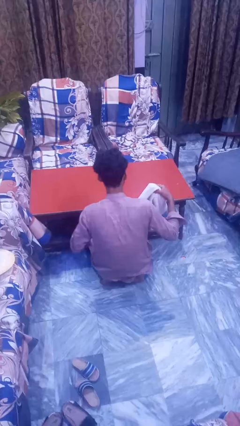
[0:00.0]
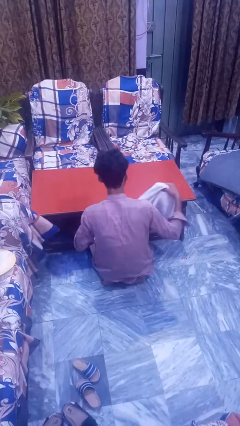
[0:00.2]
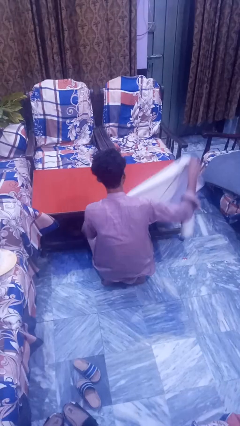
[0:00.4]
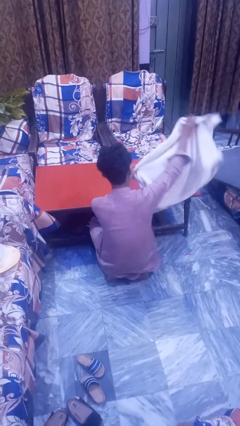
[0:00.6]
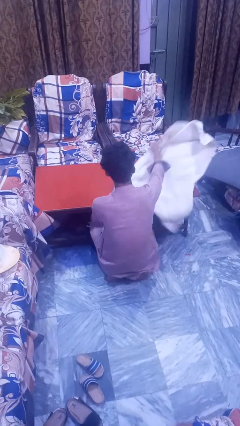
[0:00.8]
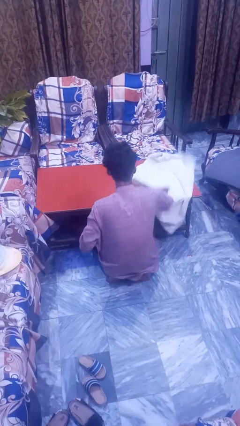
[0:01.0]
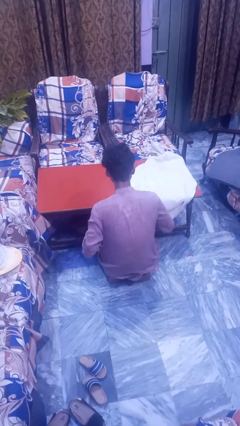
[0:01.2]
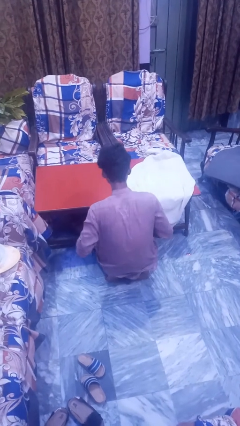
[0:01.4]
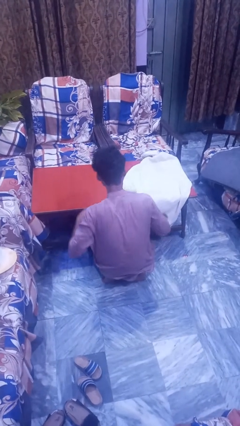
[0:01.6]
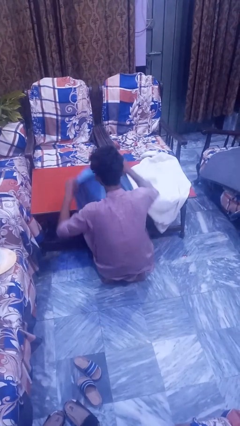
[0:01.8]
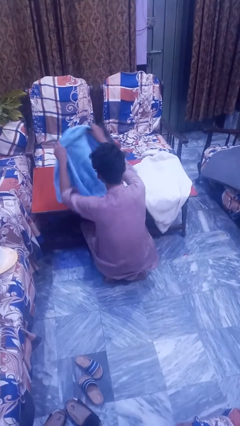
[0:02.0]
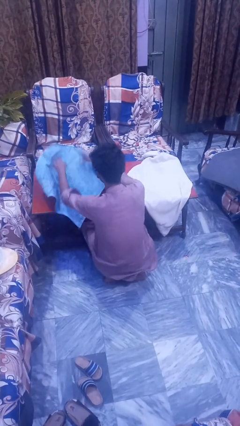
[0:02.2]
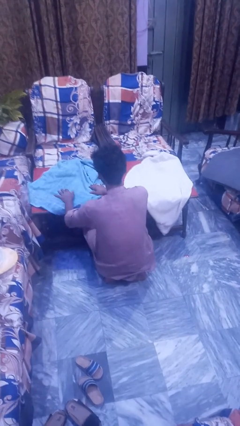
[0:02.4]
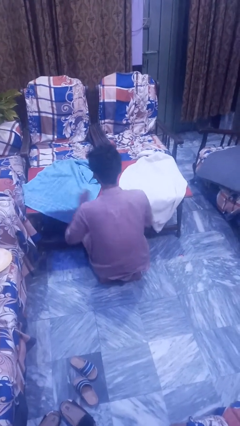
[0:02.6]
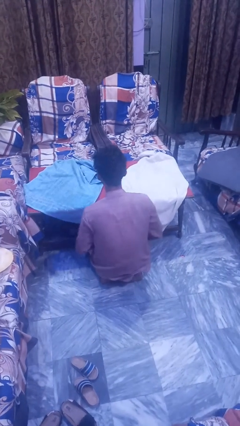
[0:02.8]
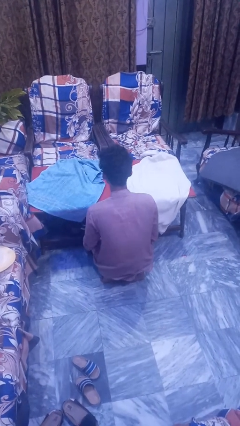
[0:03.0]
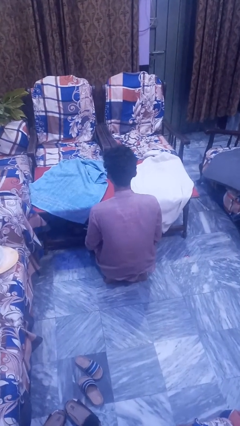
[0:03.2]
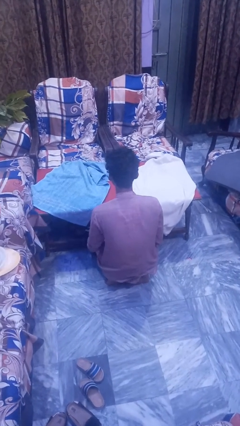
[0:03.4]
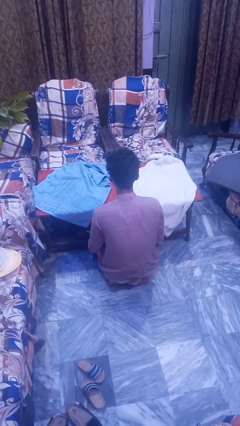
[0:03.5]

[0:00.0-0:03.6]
person spreads tablecloth

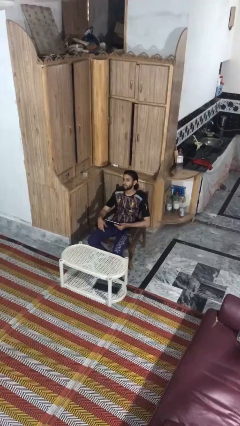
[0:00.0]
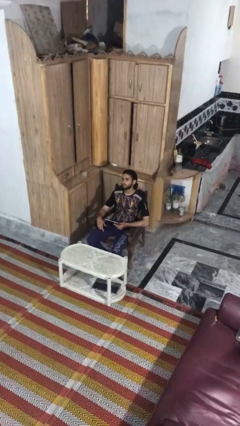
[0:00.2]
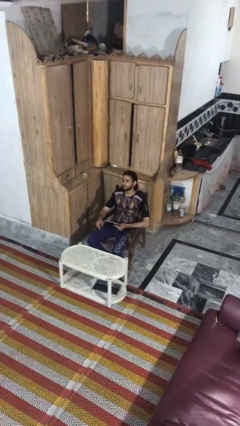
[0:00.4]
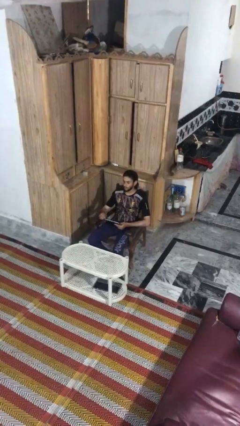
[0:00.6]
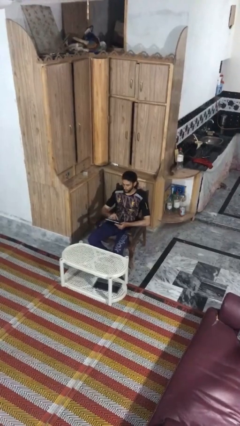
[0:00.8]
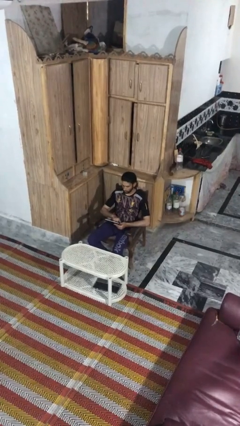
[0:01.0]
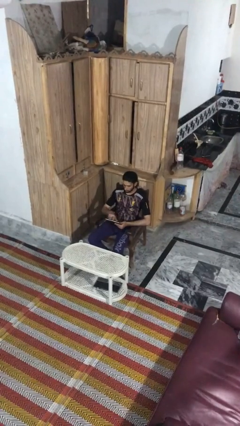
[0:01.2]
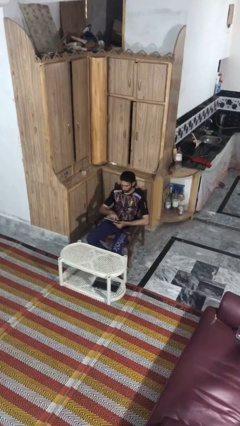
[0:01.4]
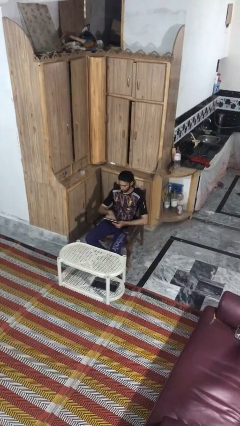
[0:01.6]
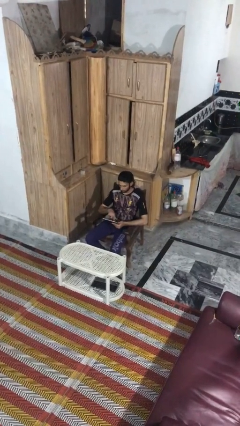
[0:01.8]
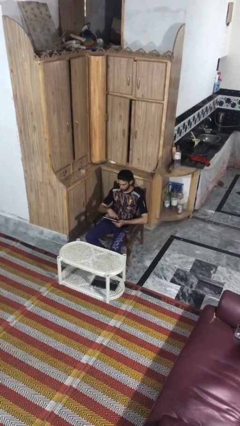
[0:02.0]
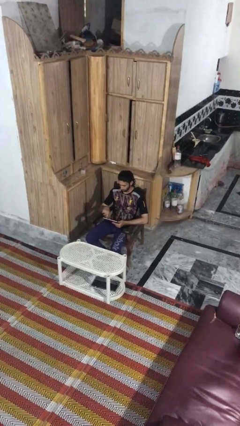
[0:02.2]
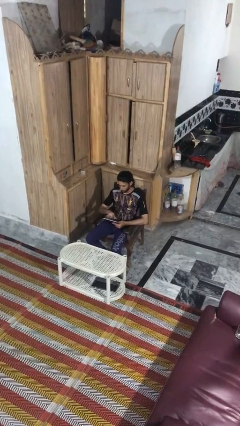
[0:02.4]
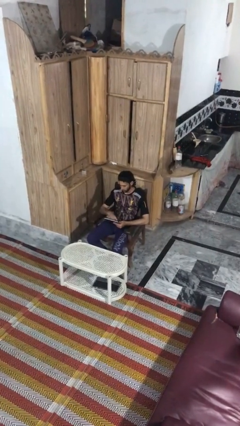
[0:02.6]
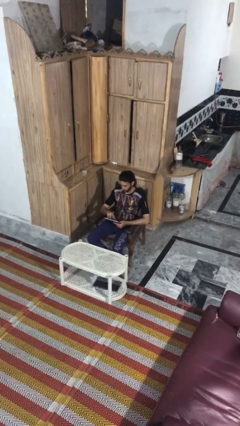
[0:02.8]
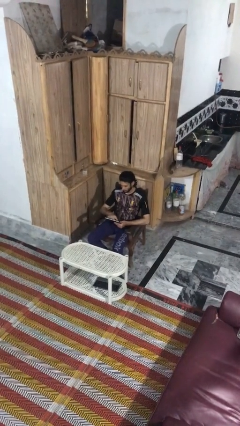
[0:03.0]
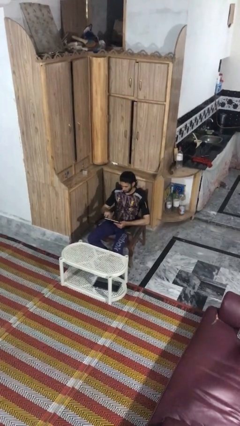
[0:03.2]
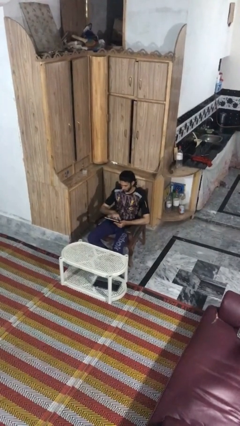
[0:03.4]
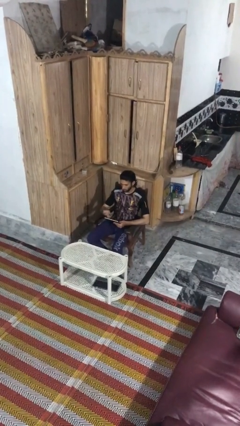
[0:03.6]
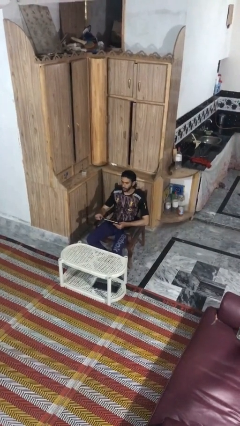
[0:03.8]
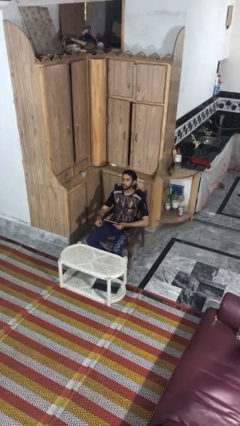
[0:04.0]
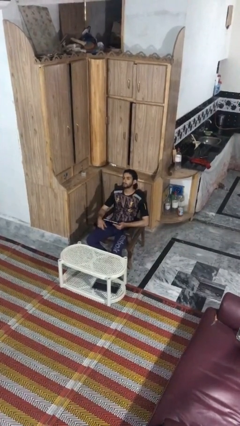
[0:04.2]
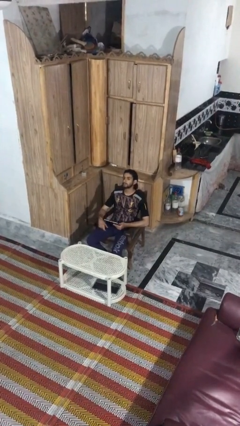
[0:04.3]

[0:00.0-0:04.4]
person interacts with tablet

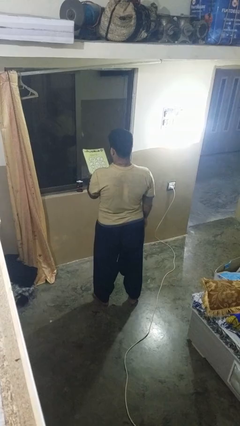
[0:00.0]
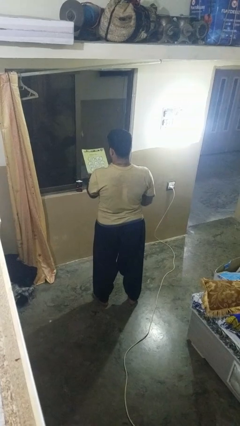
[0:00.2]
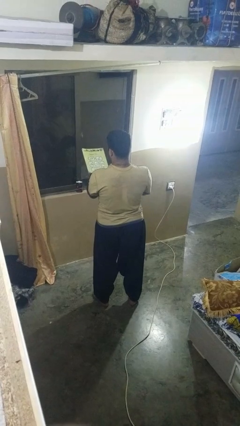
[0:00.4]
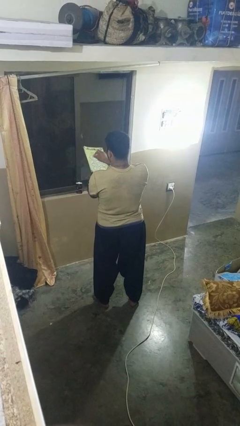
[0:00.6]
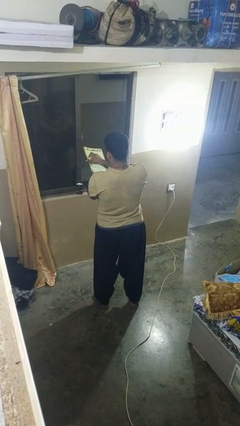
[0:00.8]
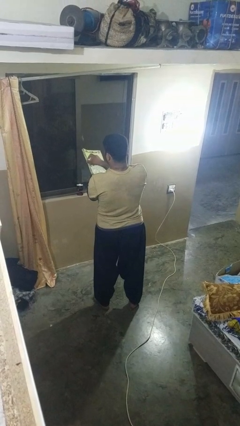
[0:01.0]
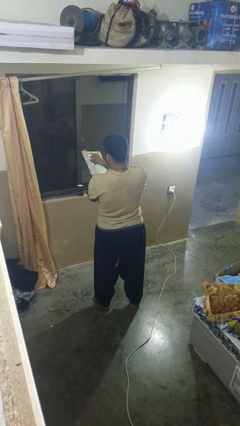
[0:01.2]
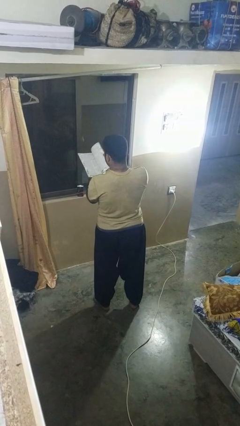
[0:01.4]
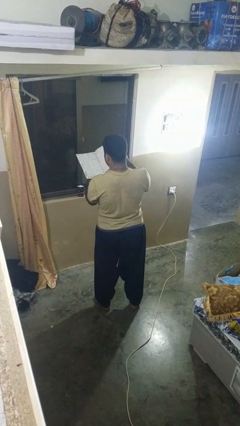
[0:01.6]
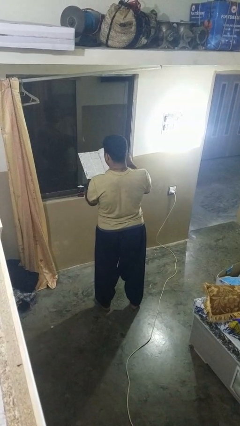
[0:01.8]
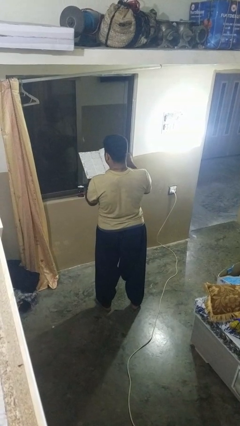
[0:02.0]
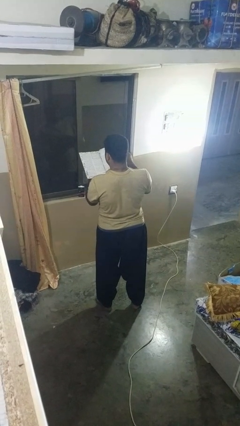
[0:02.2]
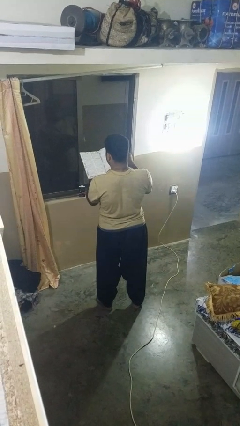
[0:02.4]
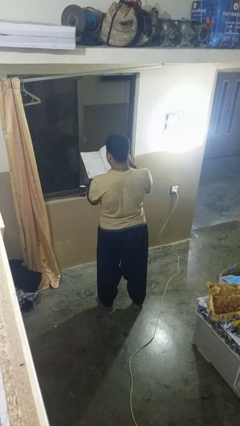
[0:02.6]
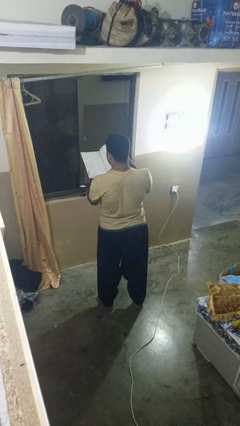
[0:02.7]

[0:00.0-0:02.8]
person reads magazine

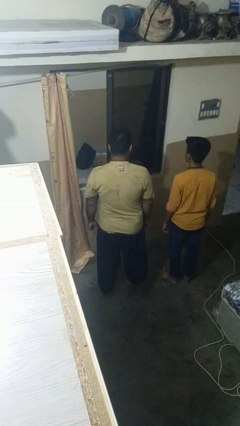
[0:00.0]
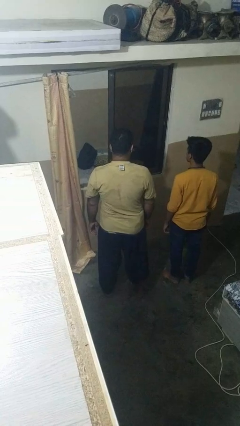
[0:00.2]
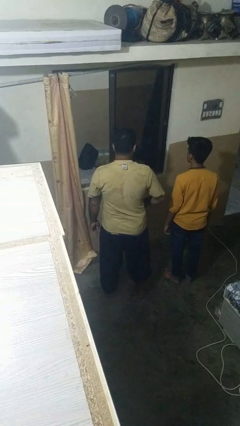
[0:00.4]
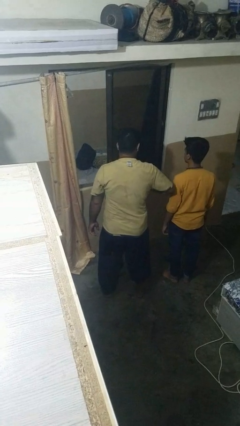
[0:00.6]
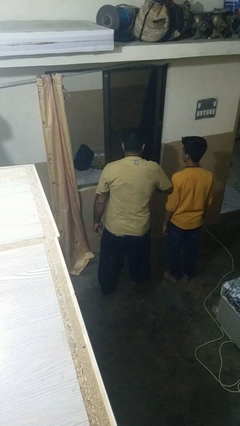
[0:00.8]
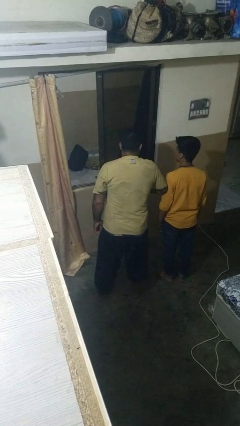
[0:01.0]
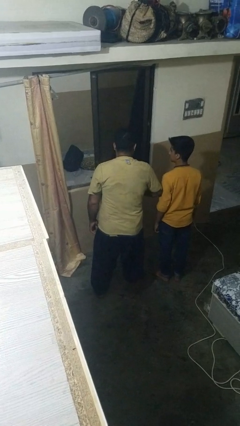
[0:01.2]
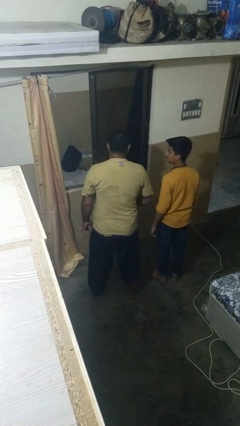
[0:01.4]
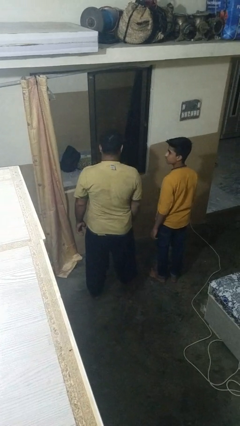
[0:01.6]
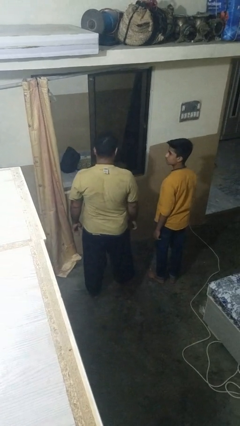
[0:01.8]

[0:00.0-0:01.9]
person nudges person with elbow

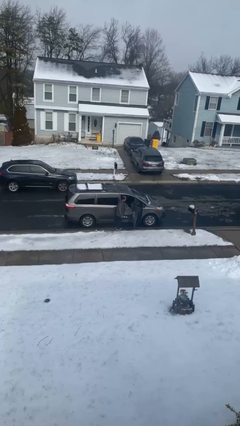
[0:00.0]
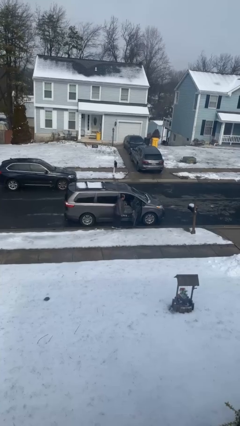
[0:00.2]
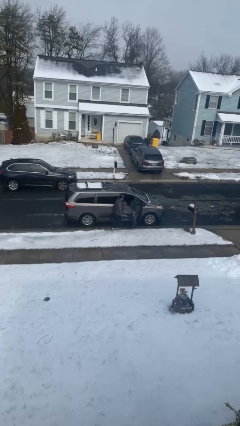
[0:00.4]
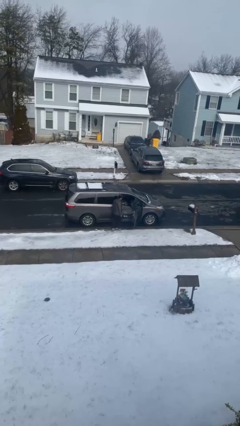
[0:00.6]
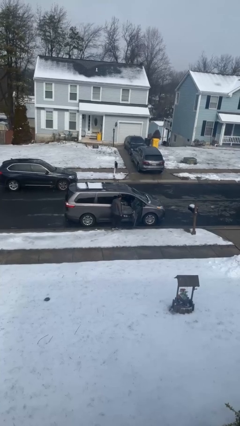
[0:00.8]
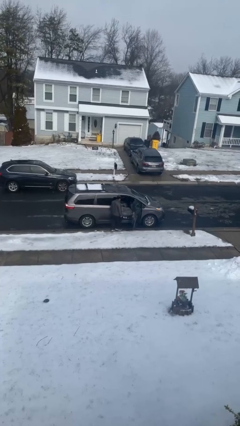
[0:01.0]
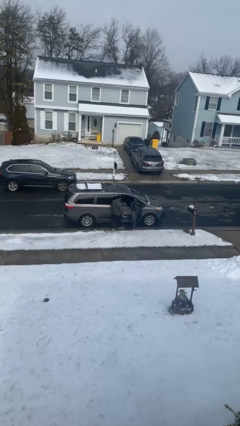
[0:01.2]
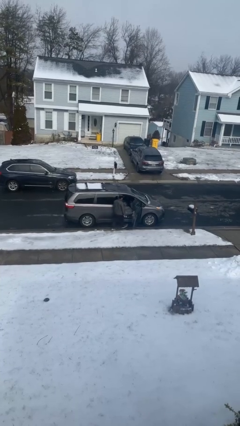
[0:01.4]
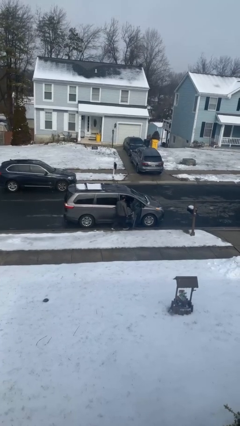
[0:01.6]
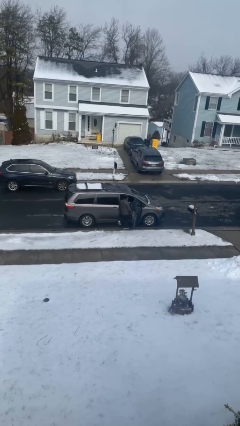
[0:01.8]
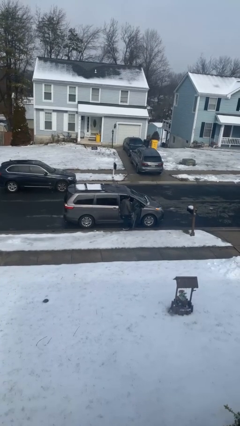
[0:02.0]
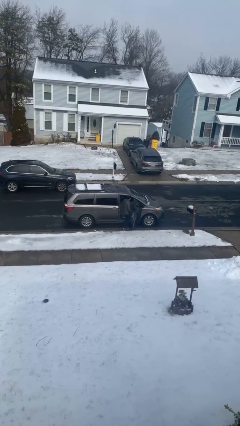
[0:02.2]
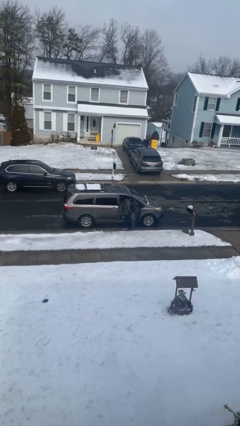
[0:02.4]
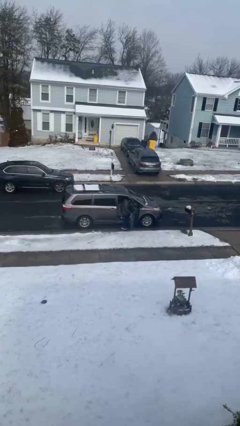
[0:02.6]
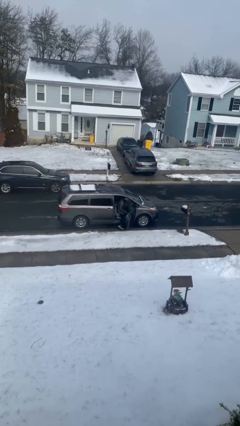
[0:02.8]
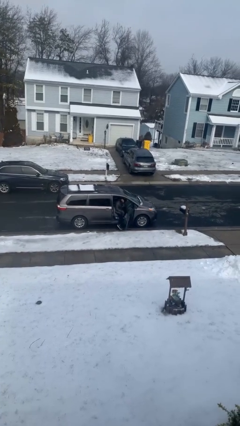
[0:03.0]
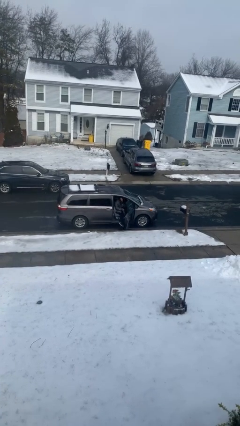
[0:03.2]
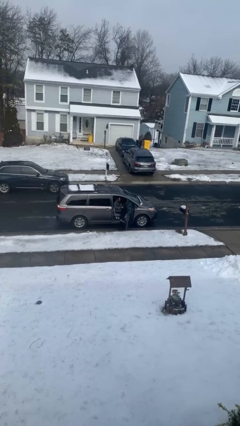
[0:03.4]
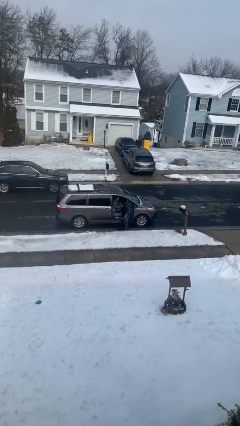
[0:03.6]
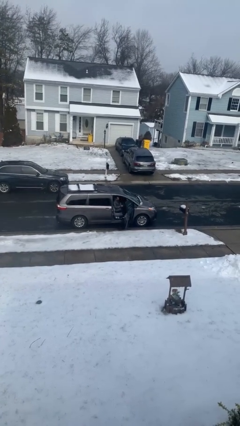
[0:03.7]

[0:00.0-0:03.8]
person enters car

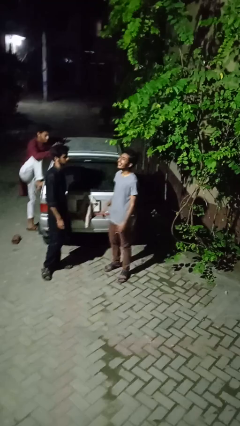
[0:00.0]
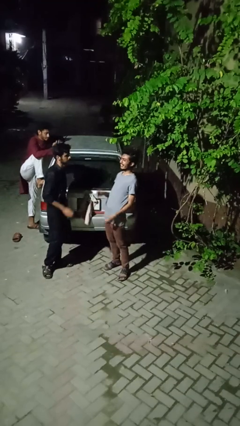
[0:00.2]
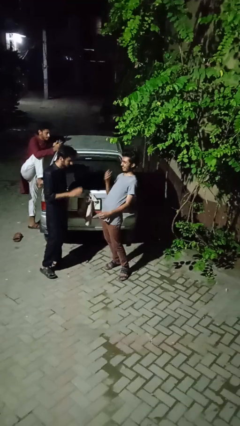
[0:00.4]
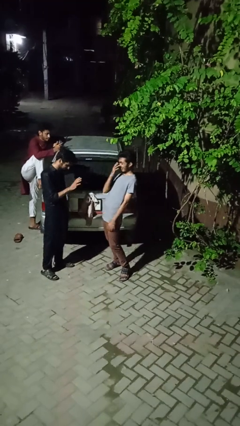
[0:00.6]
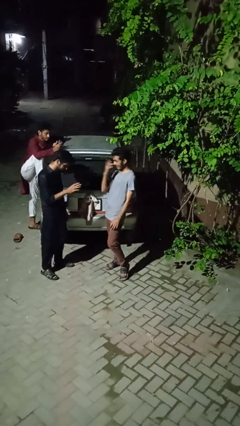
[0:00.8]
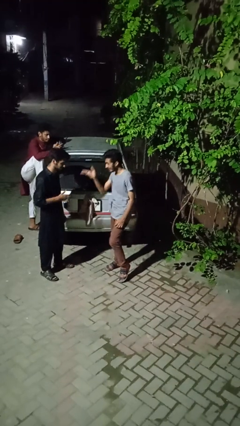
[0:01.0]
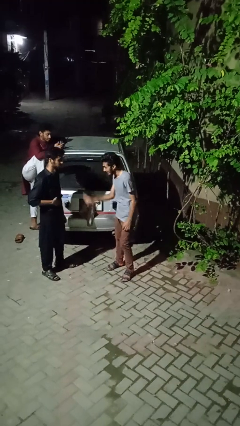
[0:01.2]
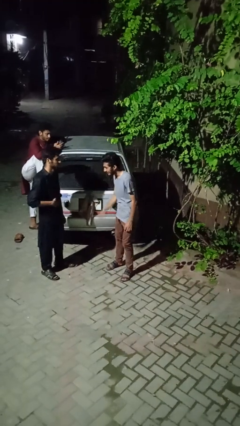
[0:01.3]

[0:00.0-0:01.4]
person laughs with person
